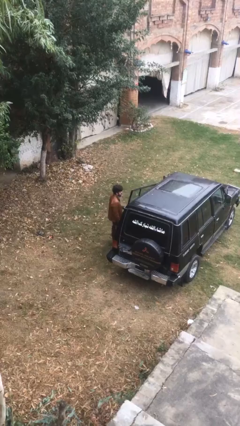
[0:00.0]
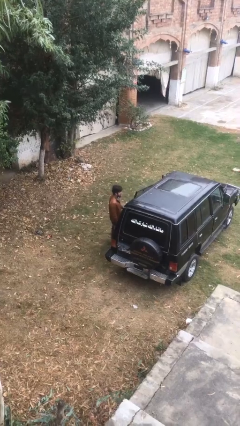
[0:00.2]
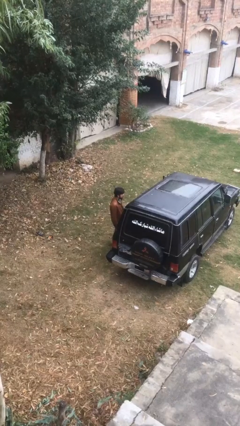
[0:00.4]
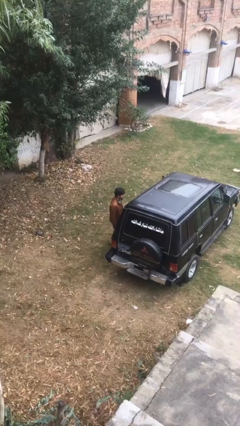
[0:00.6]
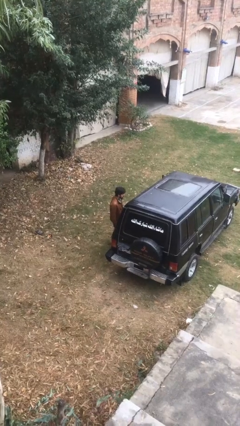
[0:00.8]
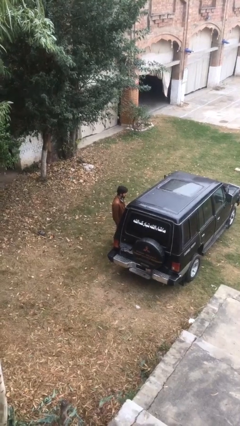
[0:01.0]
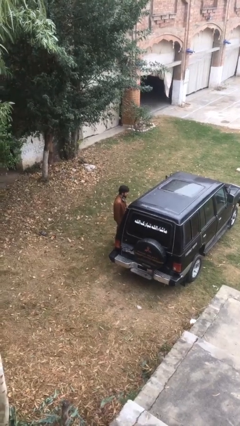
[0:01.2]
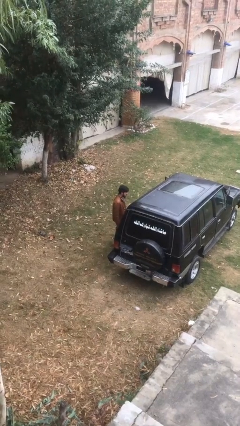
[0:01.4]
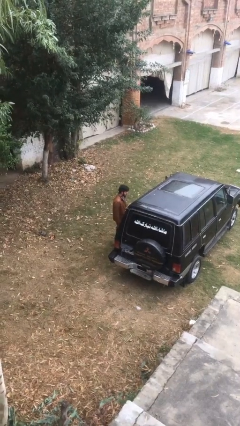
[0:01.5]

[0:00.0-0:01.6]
person closes car door

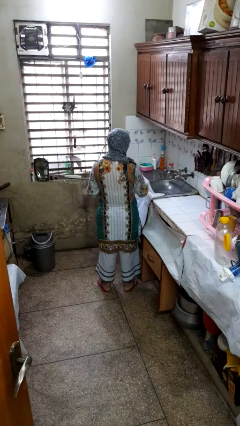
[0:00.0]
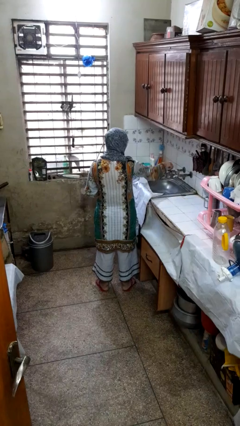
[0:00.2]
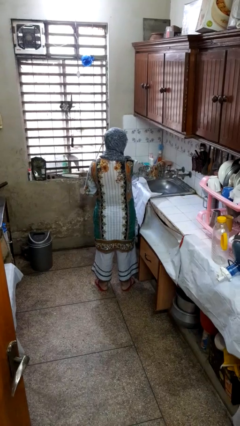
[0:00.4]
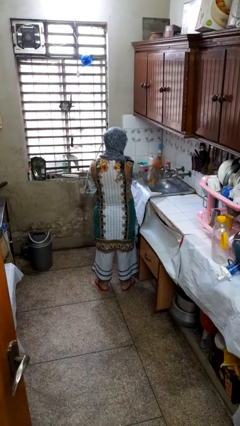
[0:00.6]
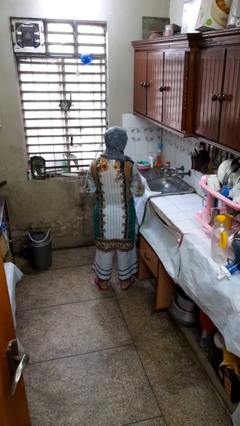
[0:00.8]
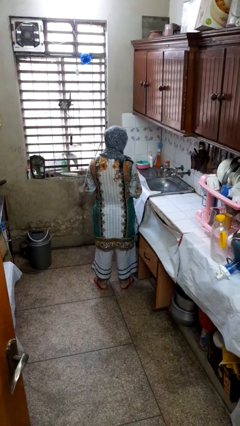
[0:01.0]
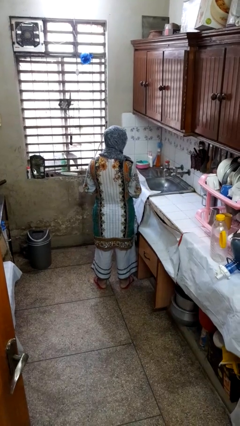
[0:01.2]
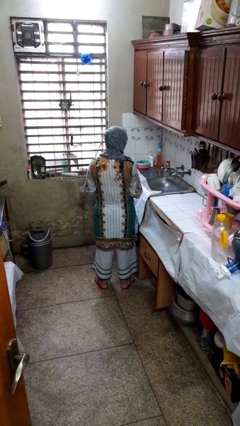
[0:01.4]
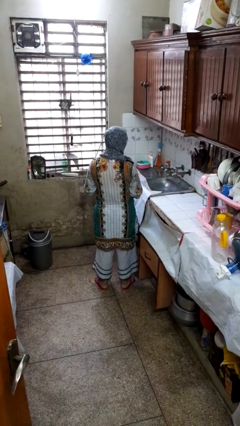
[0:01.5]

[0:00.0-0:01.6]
person turns on faucet

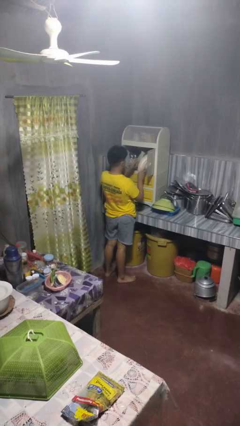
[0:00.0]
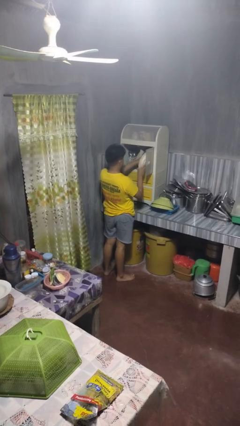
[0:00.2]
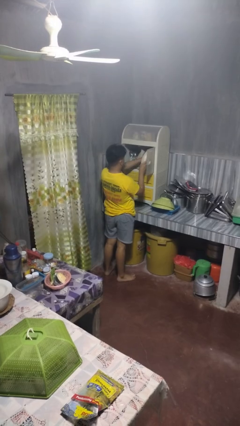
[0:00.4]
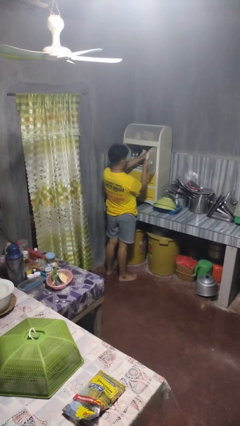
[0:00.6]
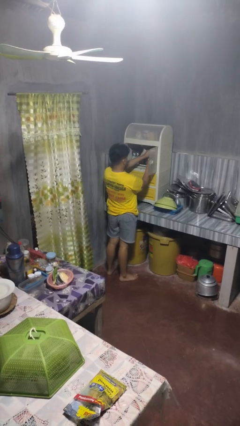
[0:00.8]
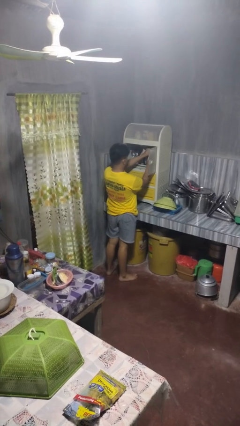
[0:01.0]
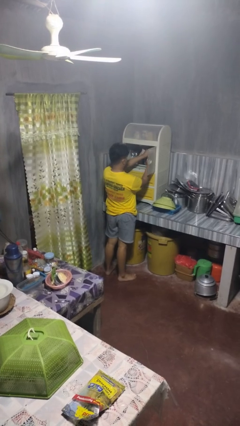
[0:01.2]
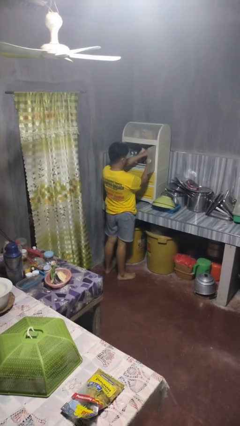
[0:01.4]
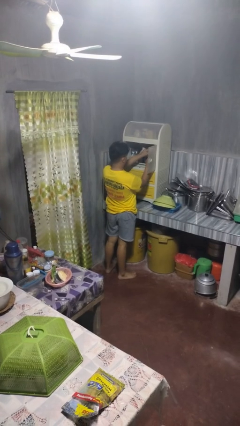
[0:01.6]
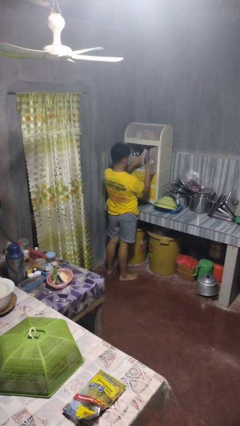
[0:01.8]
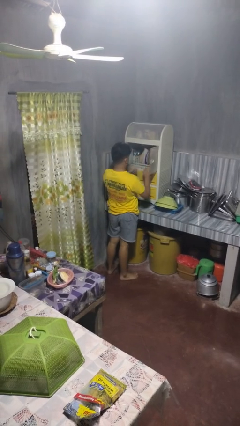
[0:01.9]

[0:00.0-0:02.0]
person puts object in cabinet

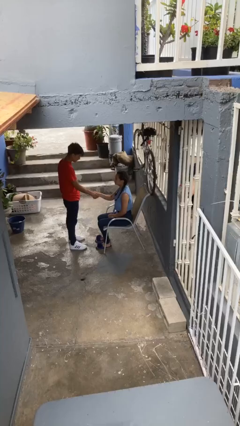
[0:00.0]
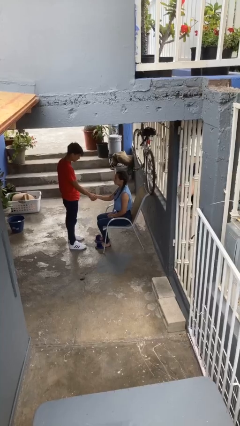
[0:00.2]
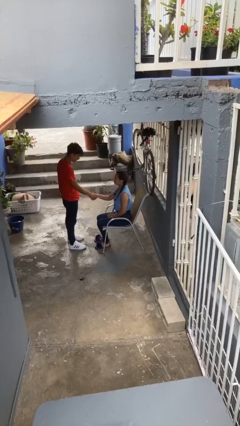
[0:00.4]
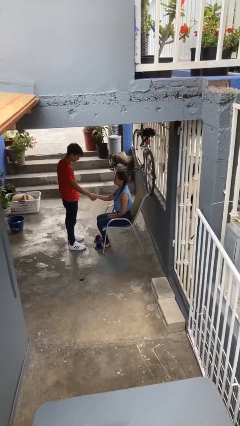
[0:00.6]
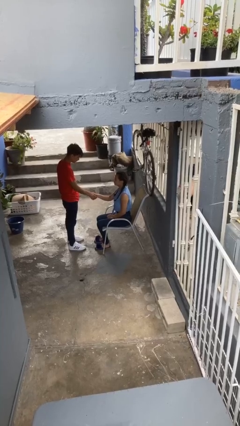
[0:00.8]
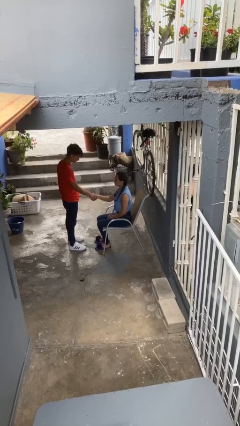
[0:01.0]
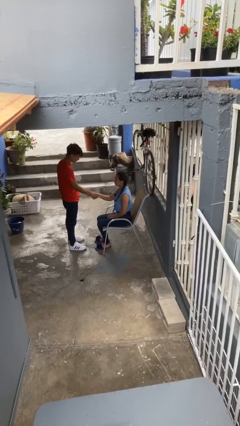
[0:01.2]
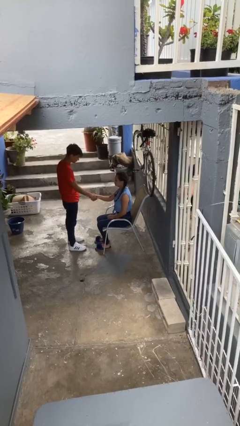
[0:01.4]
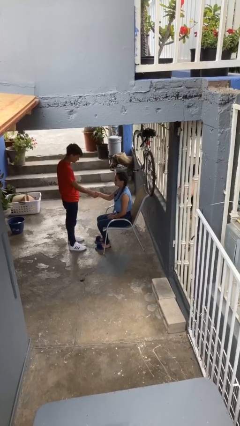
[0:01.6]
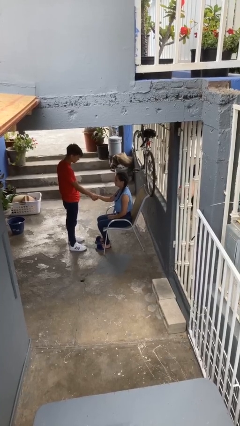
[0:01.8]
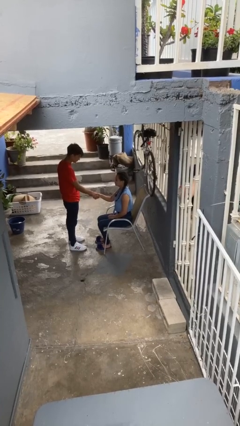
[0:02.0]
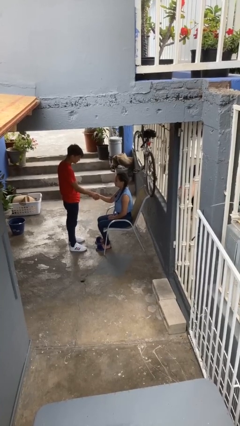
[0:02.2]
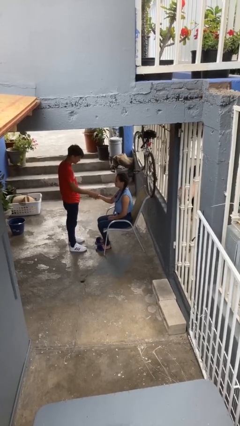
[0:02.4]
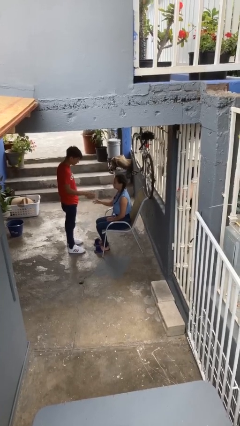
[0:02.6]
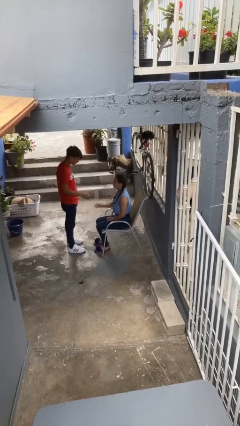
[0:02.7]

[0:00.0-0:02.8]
person shakes hand

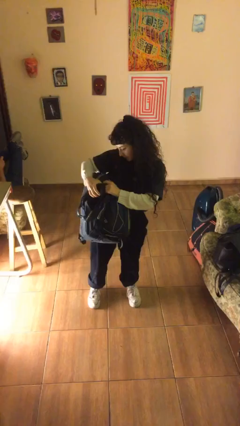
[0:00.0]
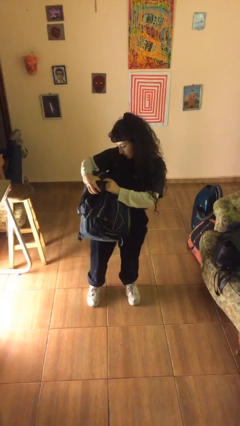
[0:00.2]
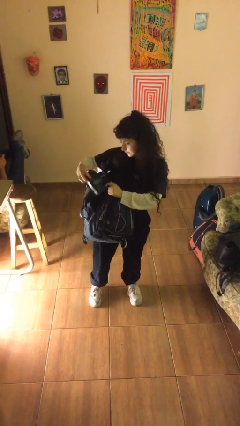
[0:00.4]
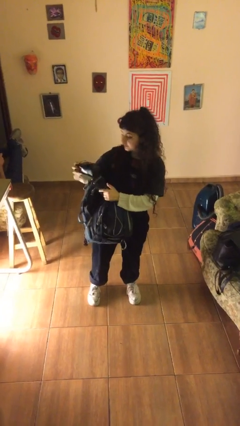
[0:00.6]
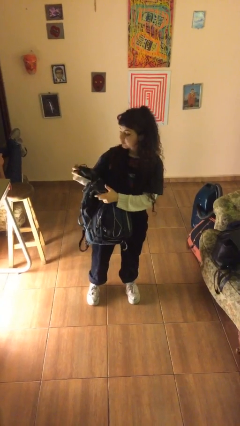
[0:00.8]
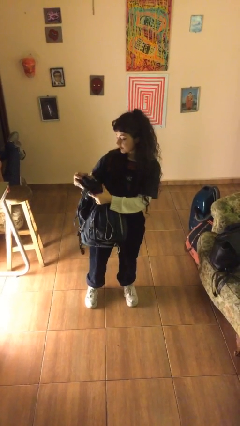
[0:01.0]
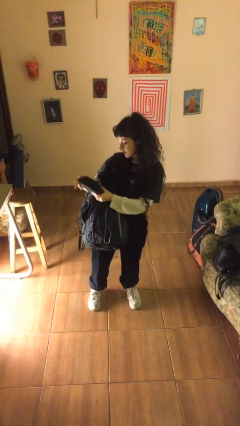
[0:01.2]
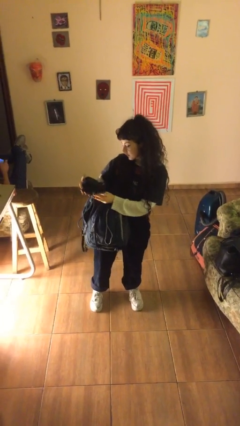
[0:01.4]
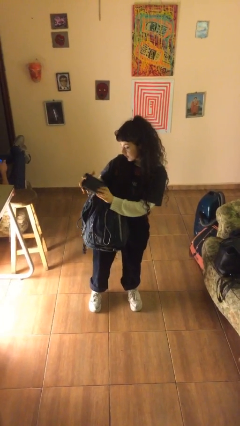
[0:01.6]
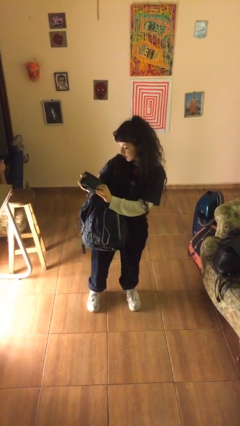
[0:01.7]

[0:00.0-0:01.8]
person takes object from backpack

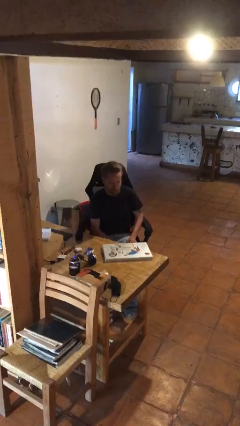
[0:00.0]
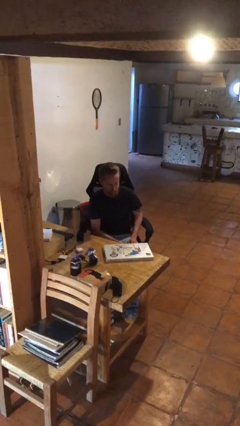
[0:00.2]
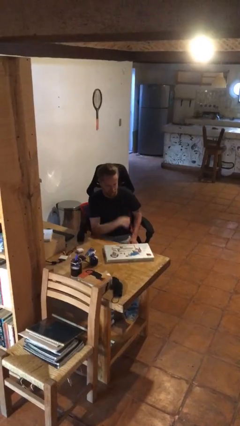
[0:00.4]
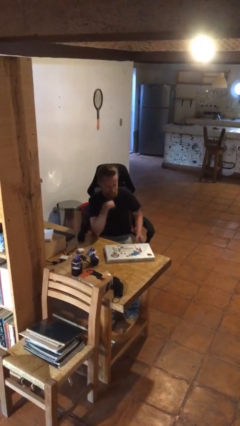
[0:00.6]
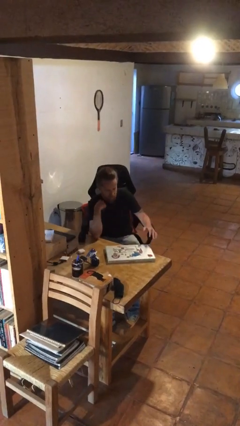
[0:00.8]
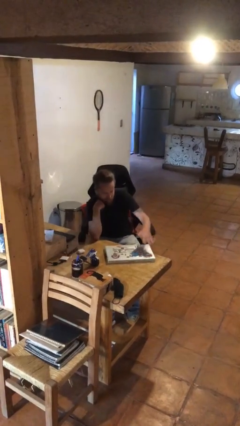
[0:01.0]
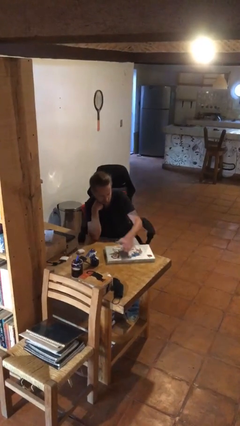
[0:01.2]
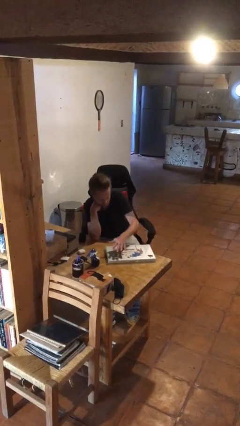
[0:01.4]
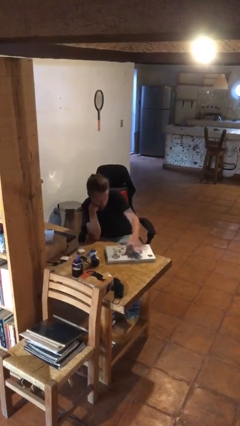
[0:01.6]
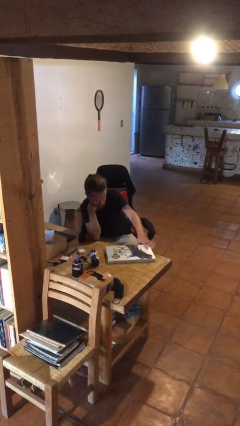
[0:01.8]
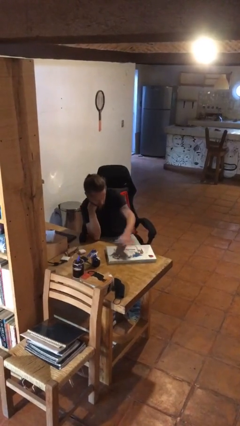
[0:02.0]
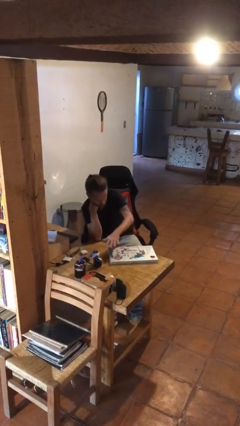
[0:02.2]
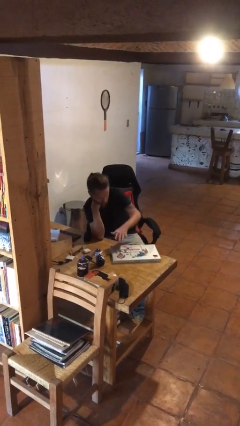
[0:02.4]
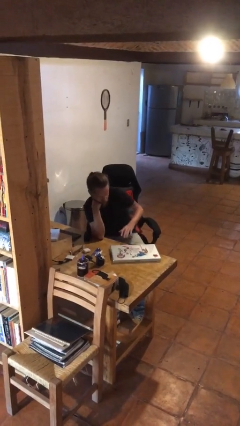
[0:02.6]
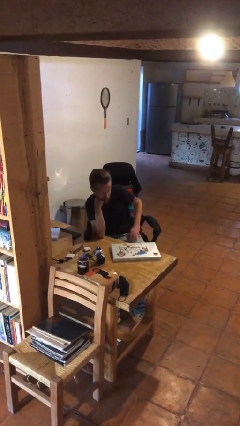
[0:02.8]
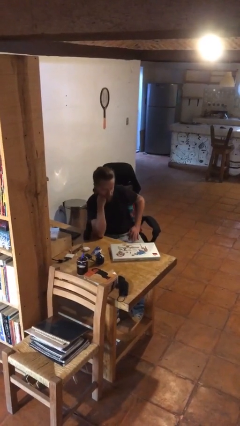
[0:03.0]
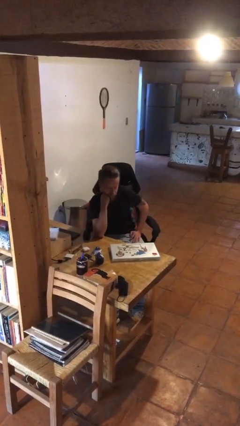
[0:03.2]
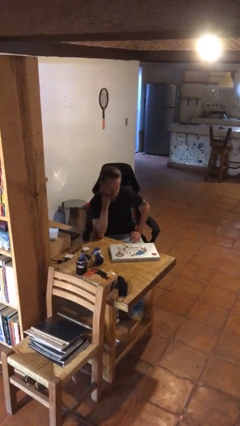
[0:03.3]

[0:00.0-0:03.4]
person waves hand over object

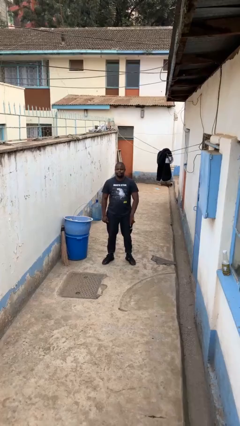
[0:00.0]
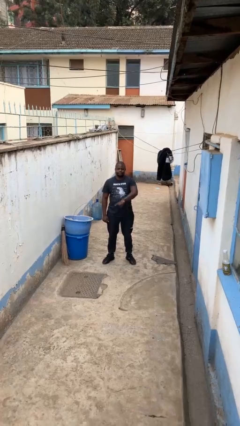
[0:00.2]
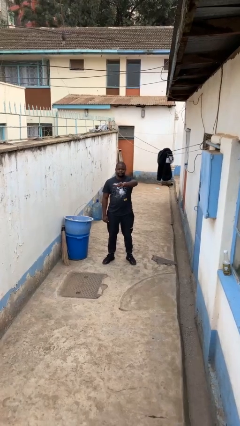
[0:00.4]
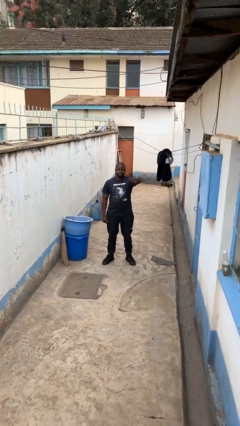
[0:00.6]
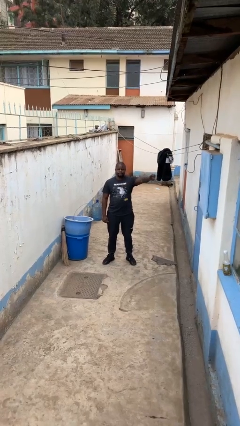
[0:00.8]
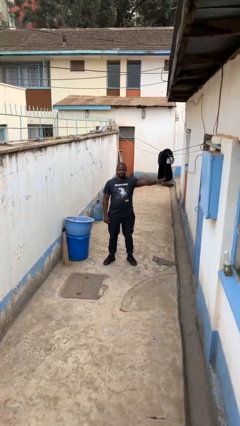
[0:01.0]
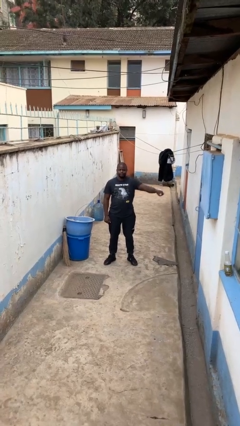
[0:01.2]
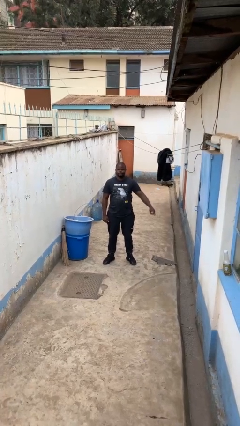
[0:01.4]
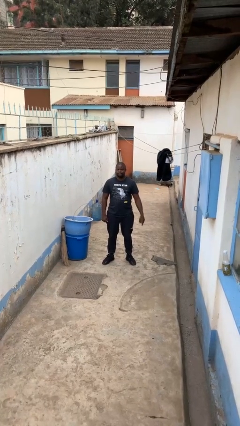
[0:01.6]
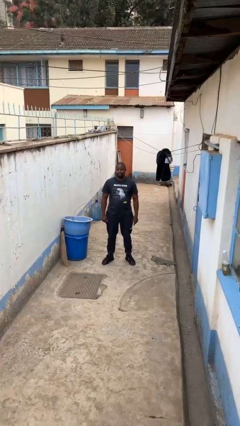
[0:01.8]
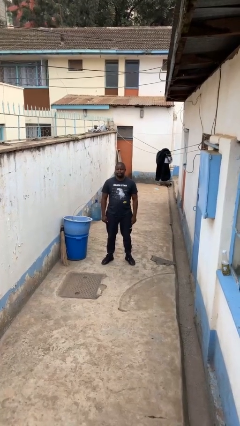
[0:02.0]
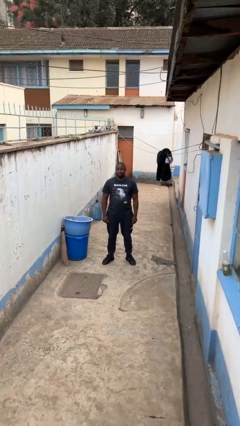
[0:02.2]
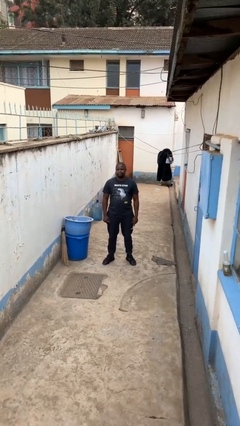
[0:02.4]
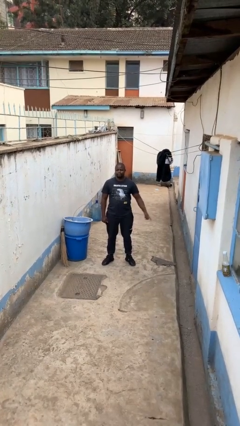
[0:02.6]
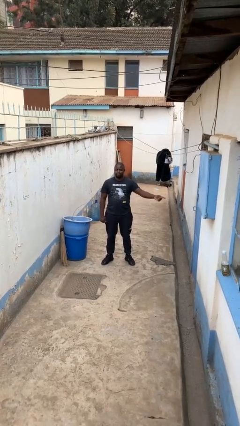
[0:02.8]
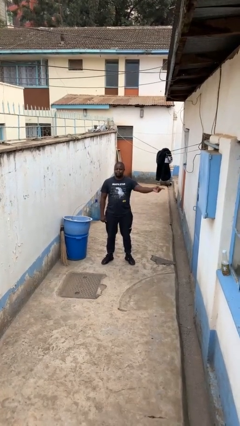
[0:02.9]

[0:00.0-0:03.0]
person gestures swipe left

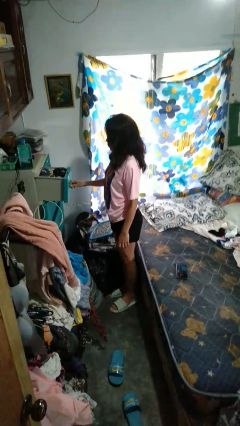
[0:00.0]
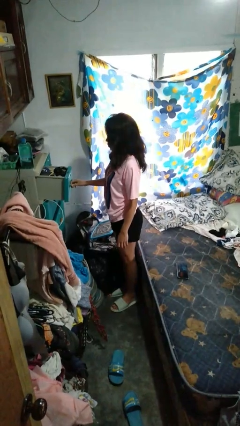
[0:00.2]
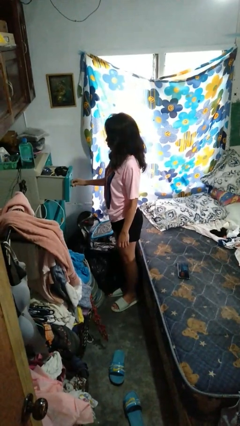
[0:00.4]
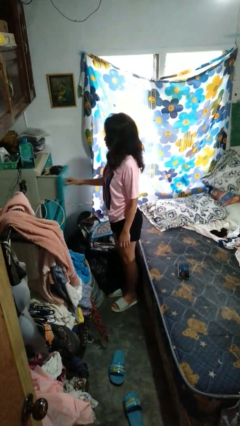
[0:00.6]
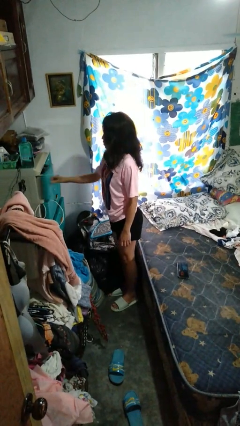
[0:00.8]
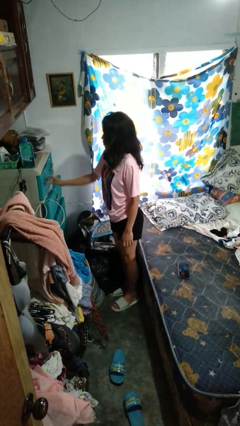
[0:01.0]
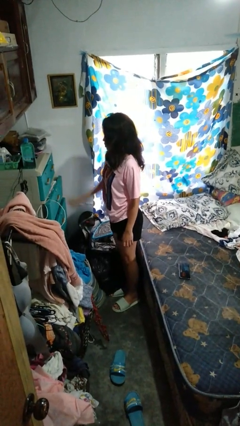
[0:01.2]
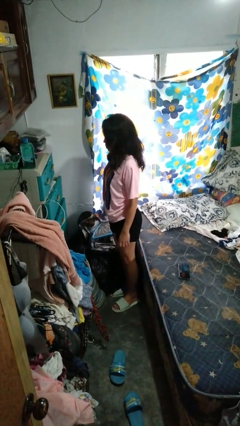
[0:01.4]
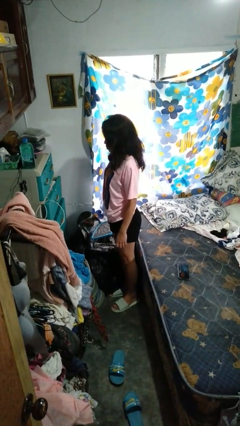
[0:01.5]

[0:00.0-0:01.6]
person closes dresser drawer
